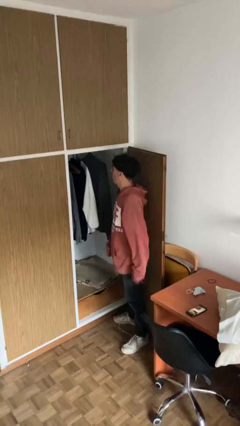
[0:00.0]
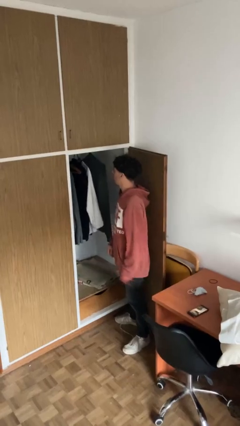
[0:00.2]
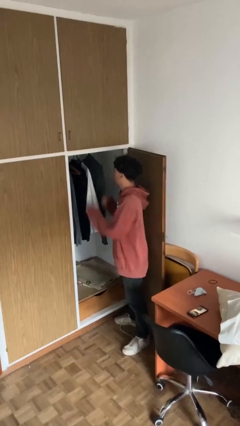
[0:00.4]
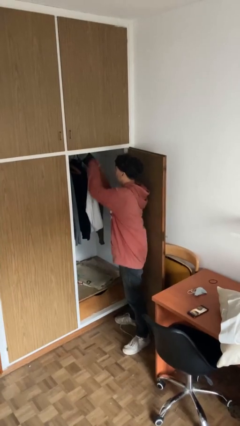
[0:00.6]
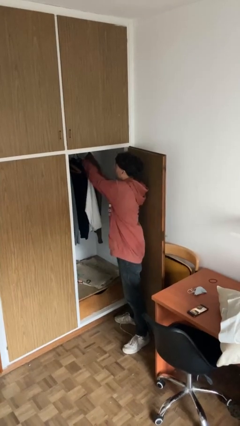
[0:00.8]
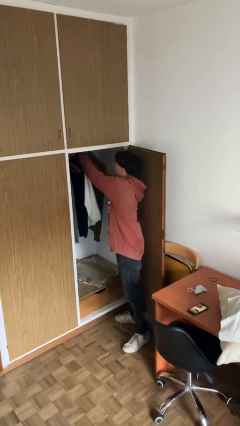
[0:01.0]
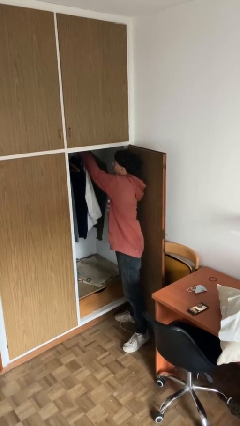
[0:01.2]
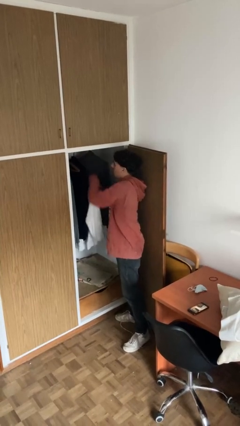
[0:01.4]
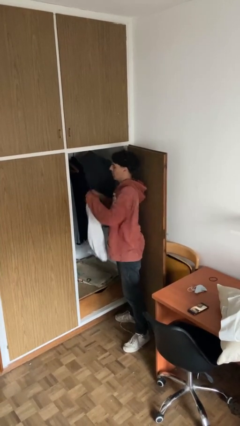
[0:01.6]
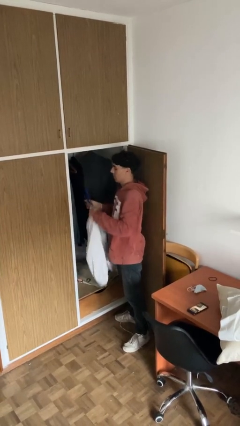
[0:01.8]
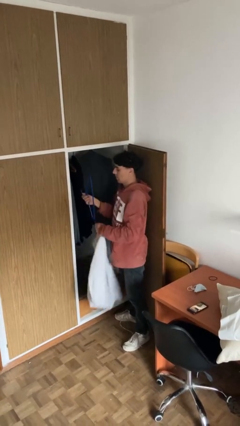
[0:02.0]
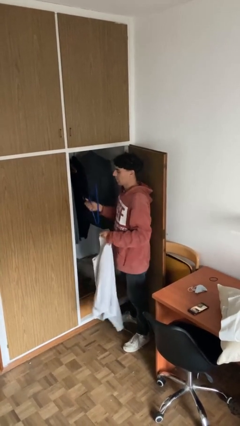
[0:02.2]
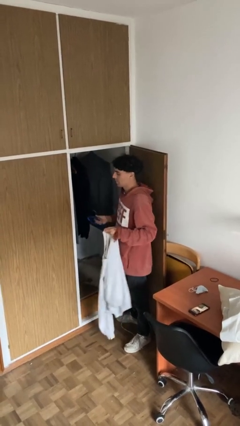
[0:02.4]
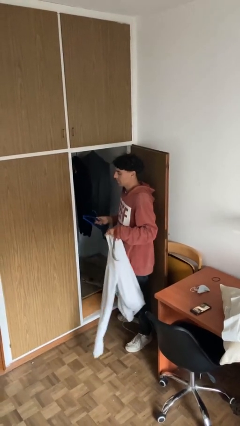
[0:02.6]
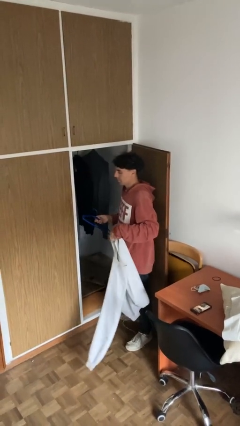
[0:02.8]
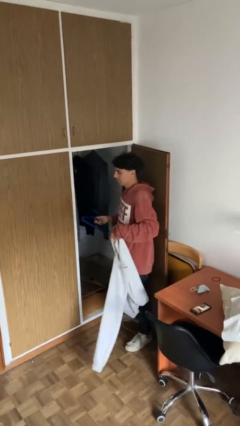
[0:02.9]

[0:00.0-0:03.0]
person takes clothes from closet

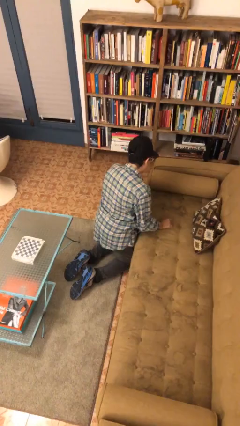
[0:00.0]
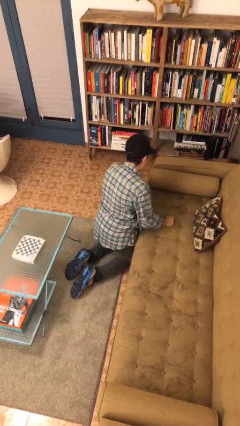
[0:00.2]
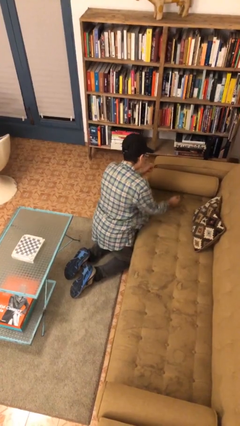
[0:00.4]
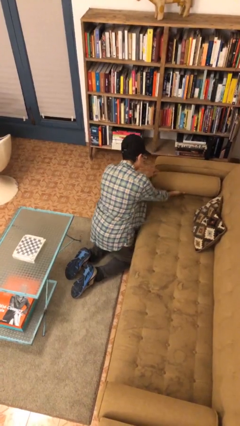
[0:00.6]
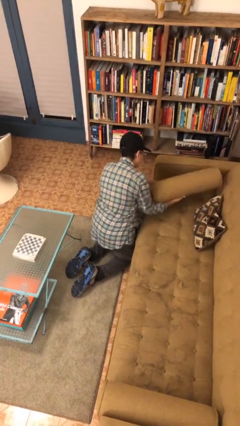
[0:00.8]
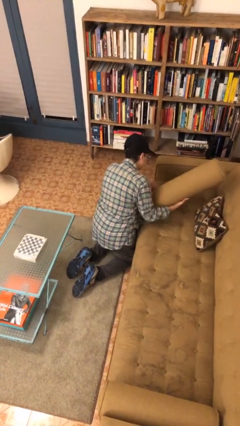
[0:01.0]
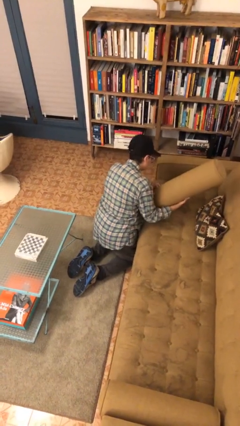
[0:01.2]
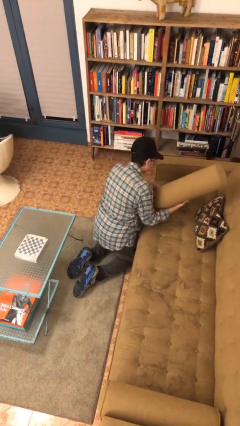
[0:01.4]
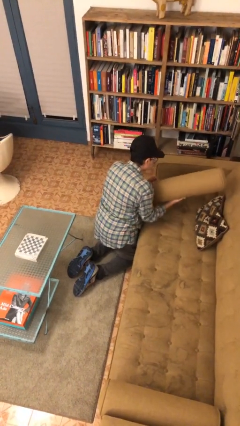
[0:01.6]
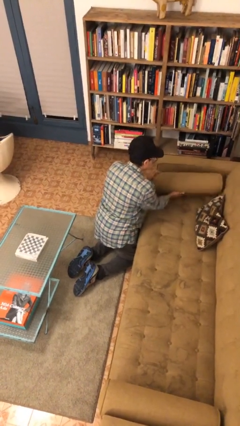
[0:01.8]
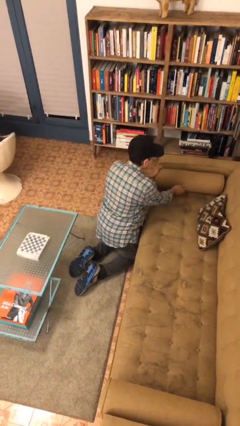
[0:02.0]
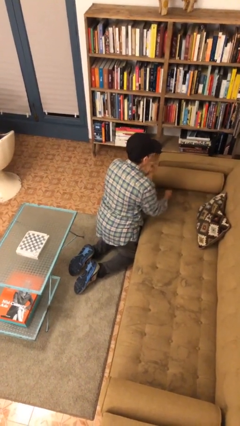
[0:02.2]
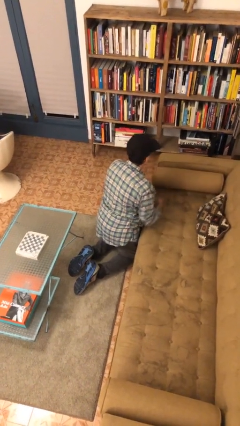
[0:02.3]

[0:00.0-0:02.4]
person searches in couch

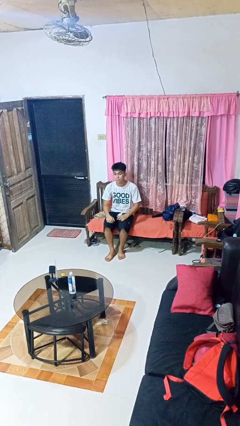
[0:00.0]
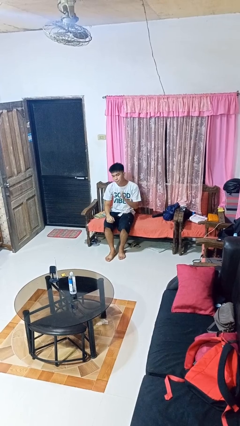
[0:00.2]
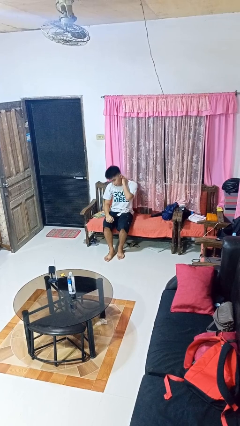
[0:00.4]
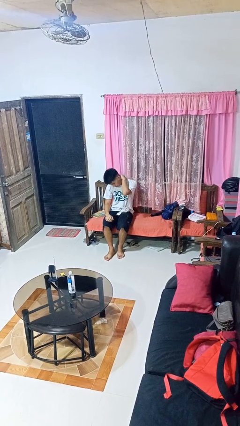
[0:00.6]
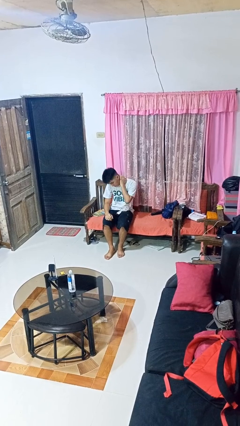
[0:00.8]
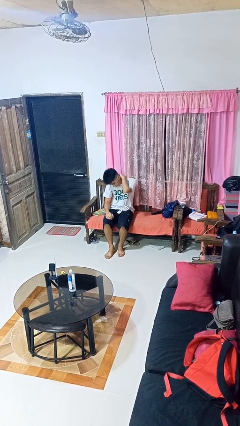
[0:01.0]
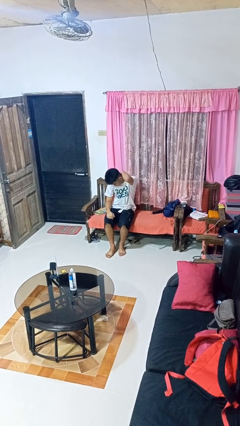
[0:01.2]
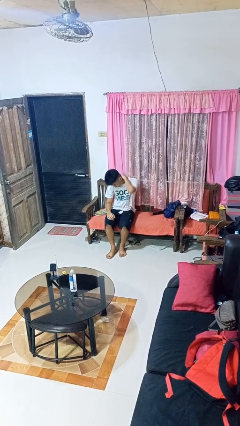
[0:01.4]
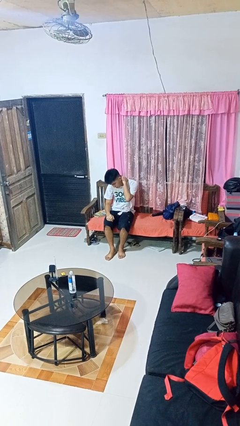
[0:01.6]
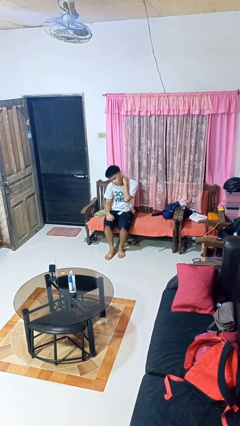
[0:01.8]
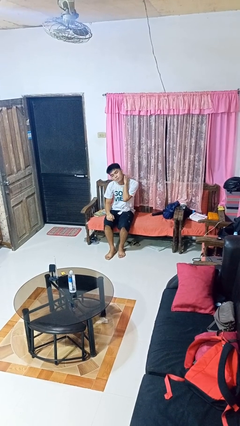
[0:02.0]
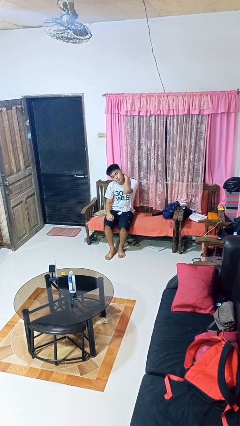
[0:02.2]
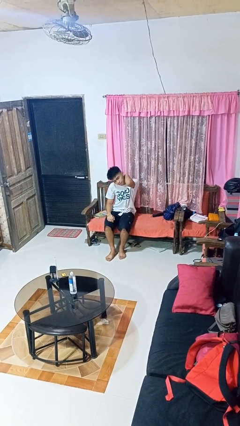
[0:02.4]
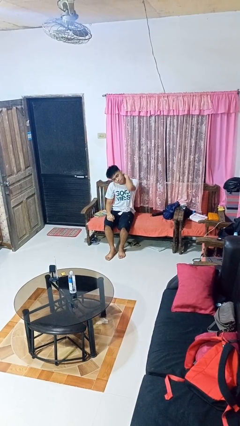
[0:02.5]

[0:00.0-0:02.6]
person rubs neck

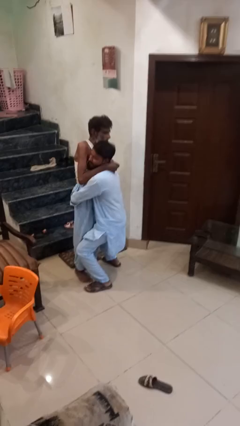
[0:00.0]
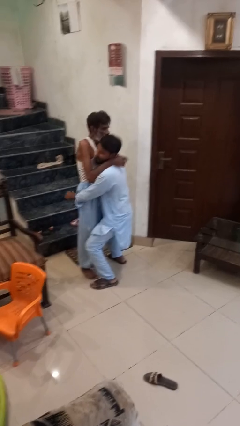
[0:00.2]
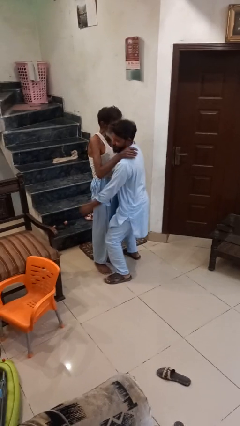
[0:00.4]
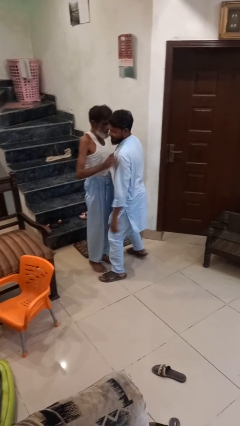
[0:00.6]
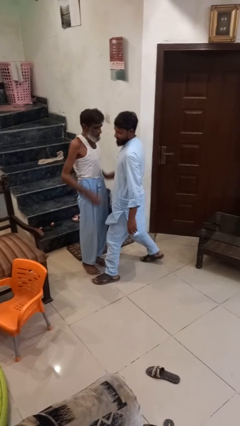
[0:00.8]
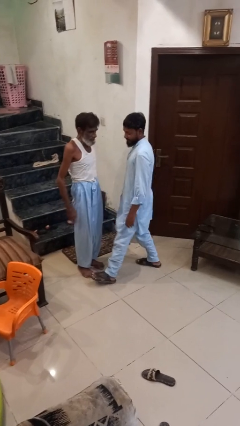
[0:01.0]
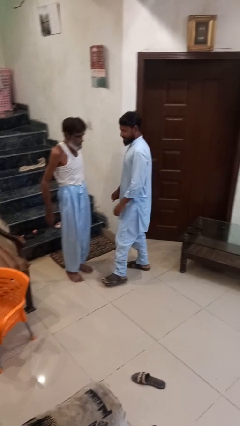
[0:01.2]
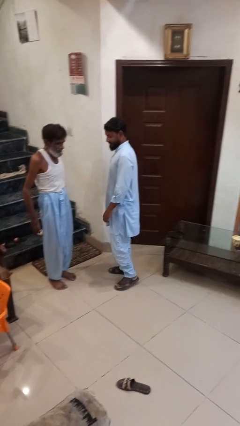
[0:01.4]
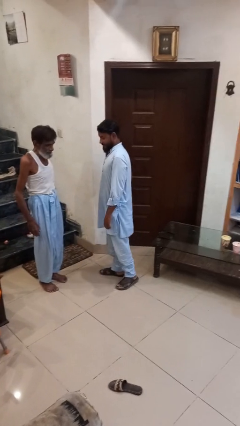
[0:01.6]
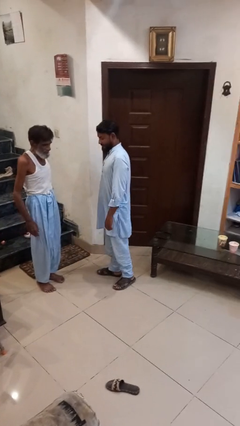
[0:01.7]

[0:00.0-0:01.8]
person puts down person

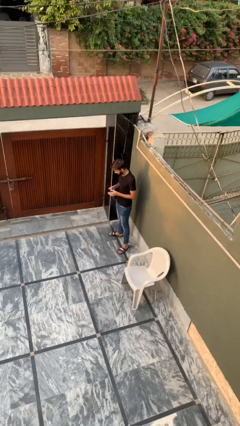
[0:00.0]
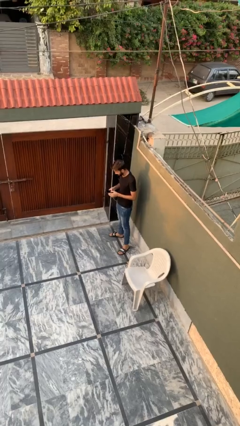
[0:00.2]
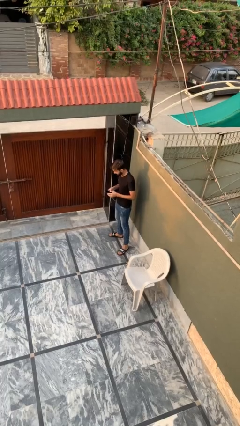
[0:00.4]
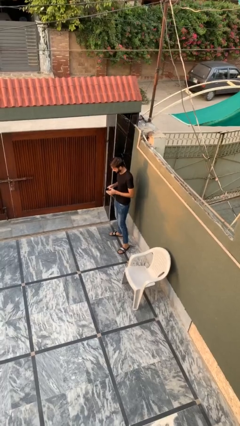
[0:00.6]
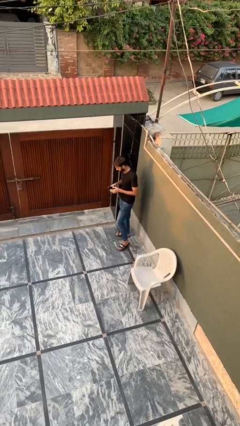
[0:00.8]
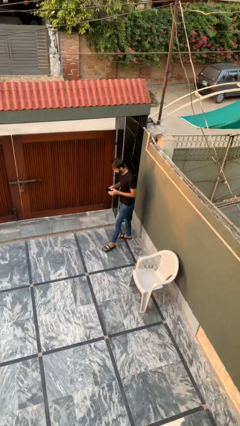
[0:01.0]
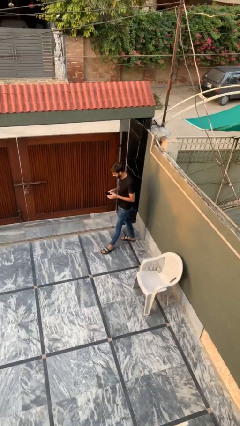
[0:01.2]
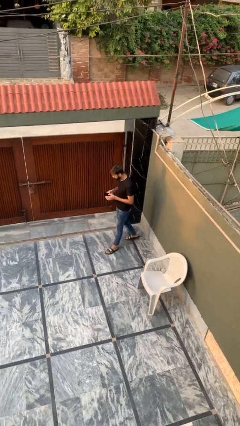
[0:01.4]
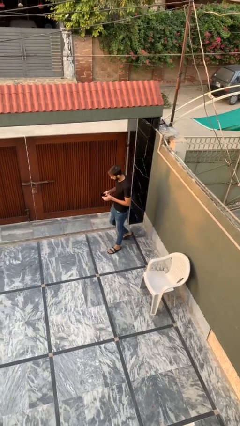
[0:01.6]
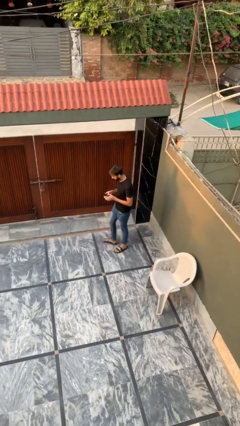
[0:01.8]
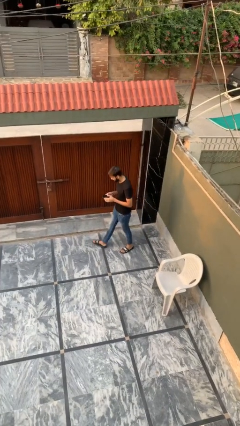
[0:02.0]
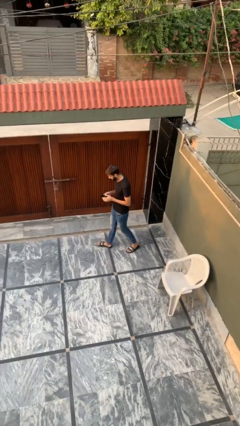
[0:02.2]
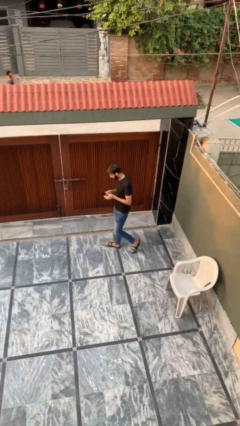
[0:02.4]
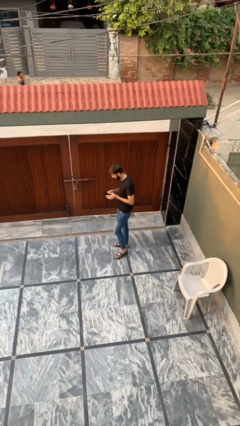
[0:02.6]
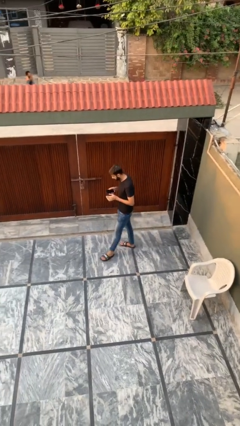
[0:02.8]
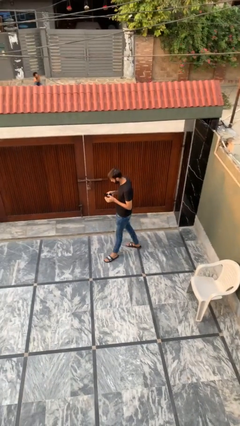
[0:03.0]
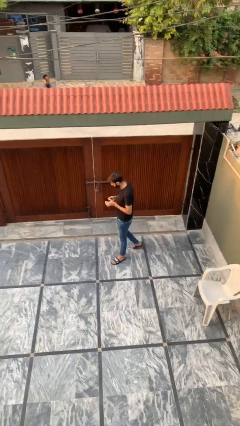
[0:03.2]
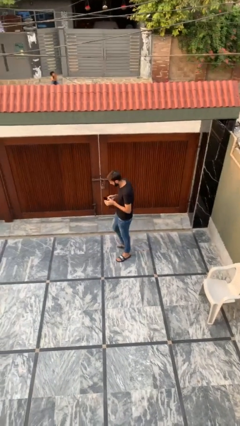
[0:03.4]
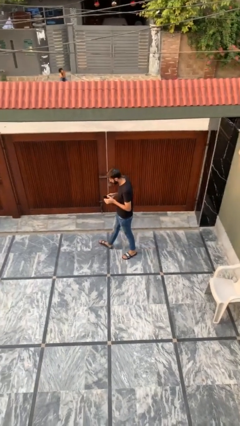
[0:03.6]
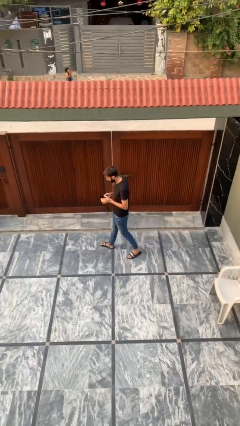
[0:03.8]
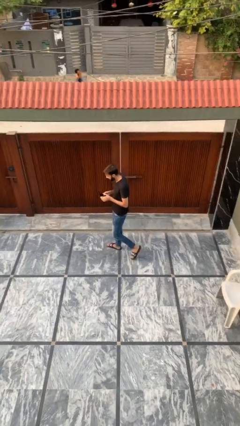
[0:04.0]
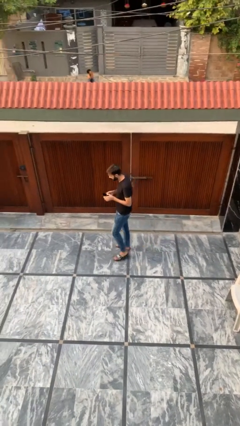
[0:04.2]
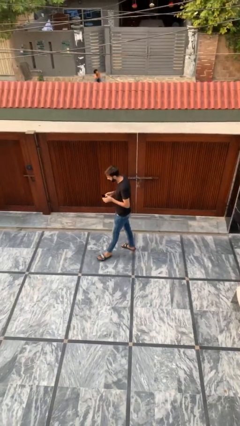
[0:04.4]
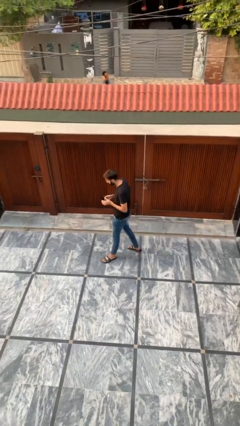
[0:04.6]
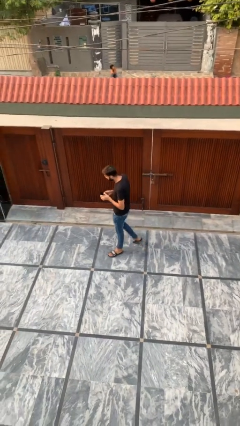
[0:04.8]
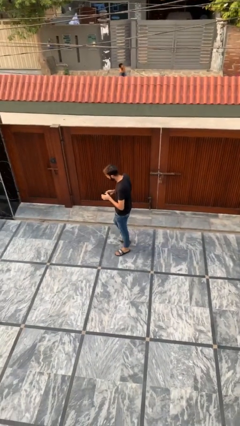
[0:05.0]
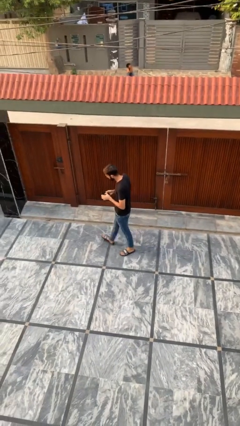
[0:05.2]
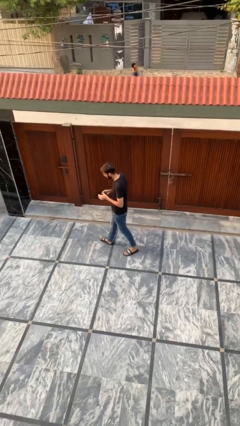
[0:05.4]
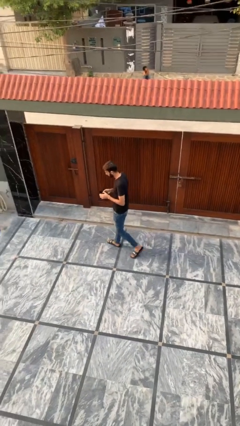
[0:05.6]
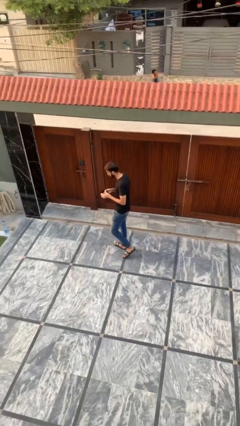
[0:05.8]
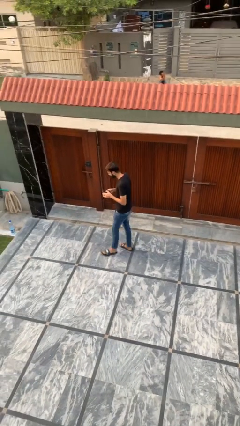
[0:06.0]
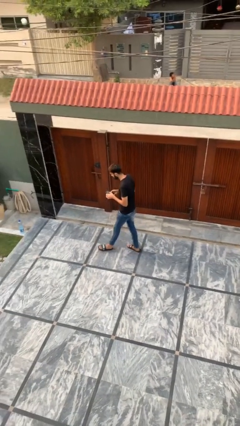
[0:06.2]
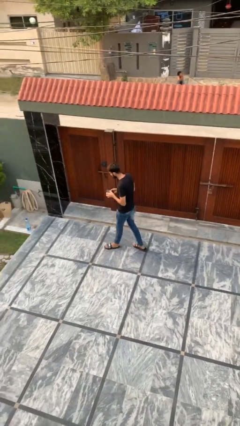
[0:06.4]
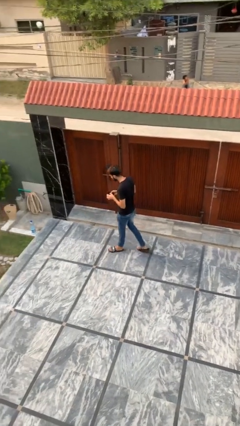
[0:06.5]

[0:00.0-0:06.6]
person texts on phone

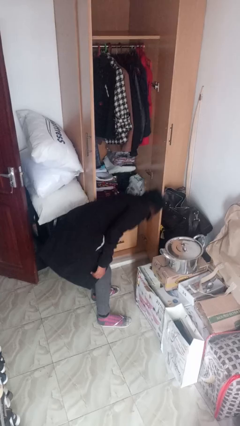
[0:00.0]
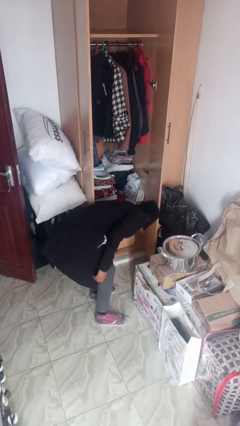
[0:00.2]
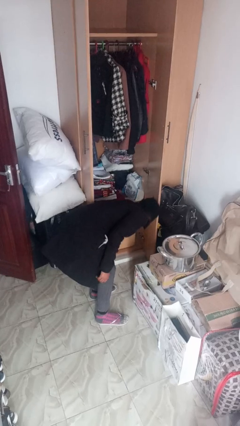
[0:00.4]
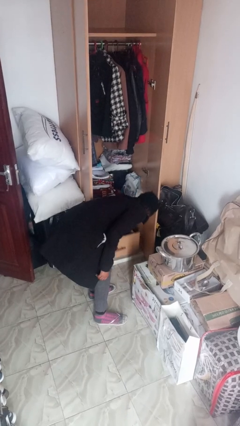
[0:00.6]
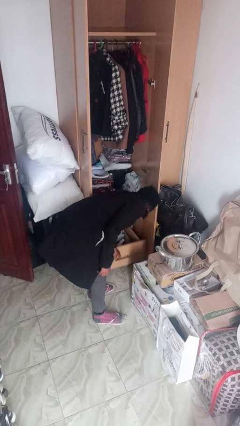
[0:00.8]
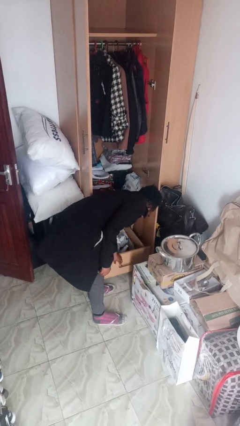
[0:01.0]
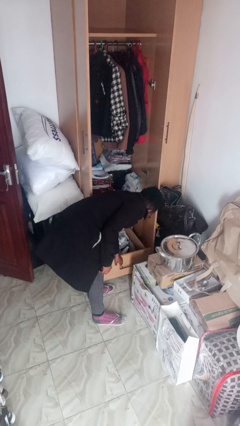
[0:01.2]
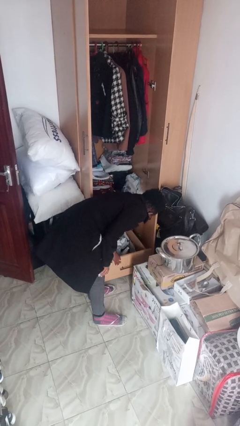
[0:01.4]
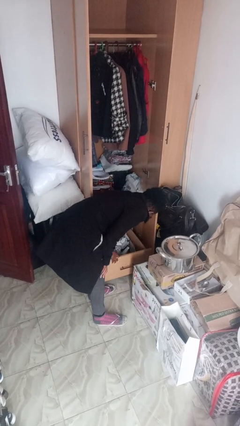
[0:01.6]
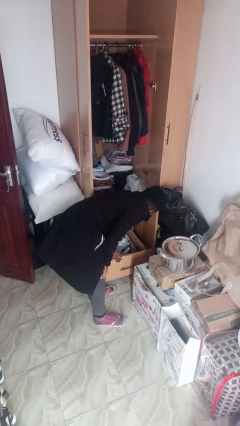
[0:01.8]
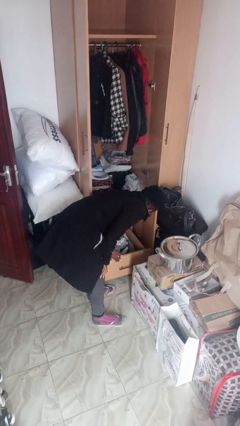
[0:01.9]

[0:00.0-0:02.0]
person opens dresser drawer
